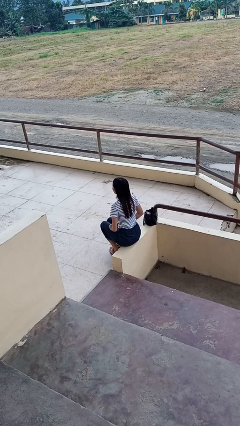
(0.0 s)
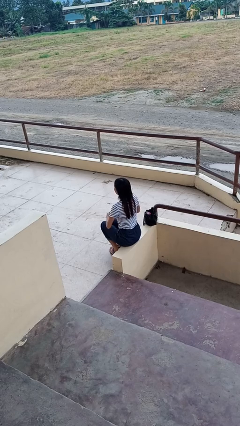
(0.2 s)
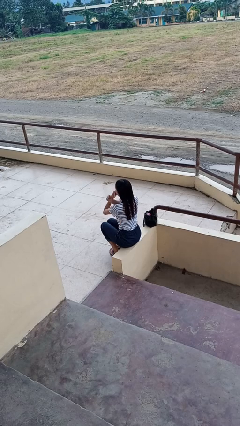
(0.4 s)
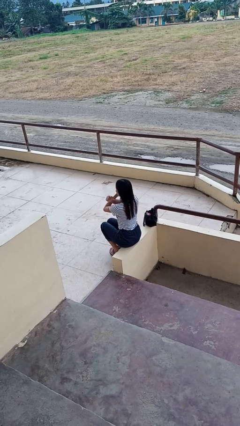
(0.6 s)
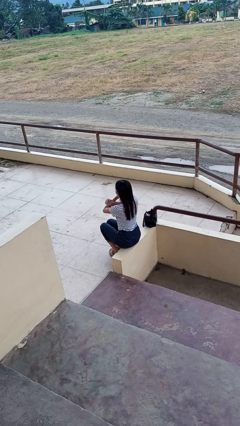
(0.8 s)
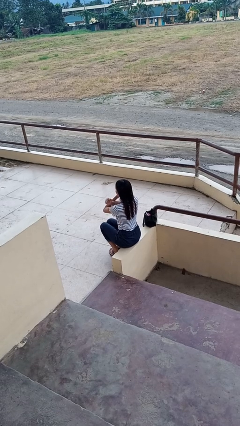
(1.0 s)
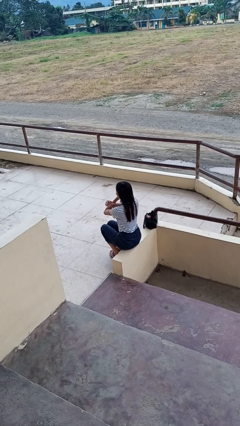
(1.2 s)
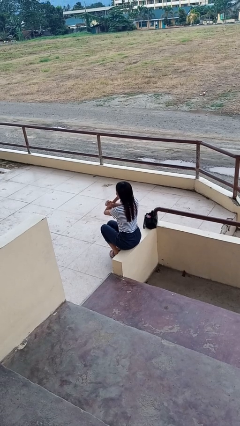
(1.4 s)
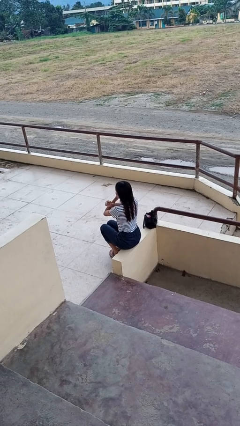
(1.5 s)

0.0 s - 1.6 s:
person gestures arms x

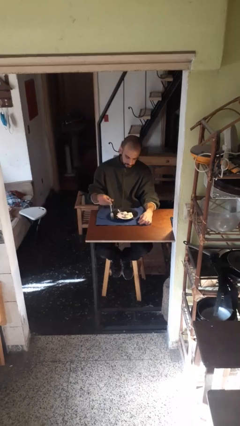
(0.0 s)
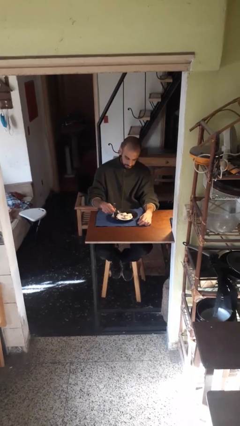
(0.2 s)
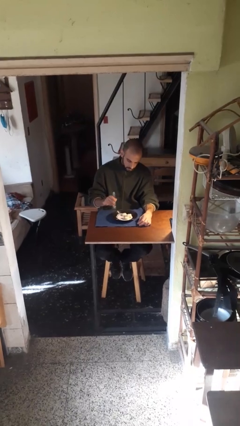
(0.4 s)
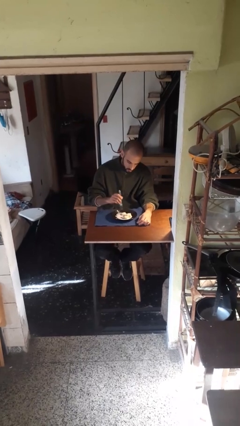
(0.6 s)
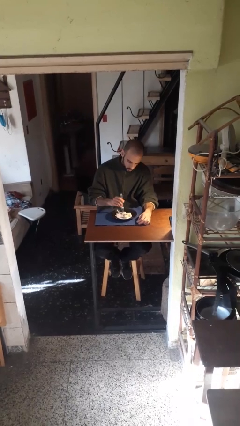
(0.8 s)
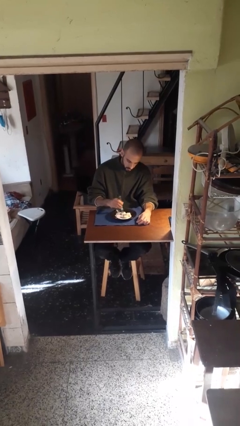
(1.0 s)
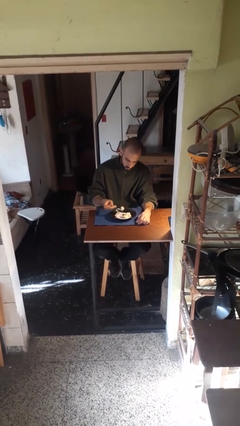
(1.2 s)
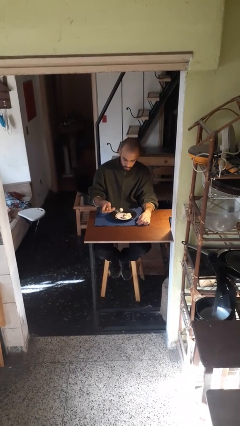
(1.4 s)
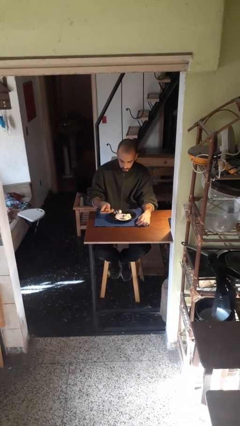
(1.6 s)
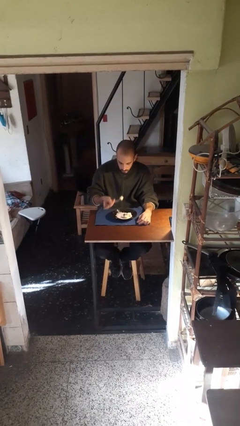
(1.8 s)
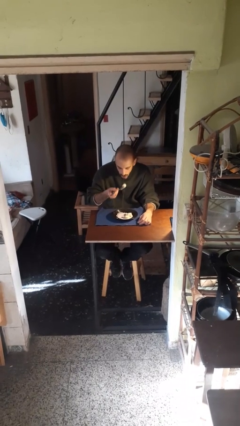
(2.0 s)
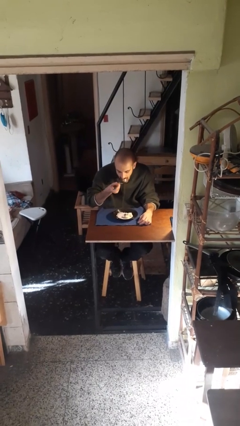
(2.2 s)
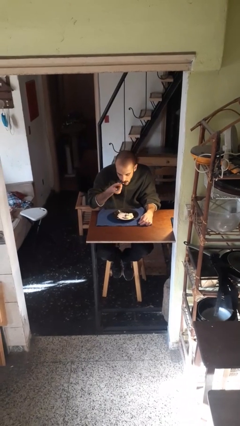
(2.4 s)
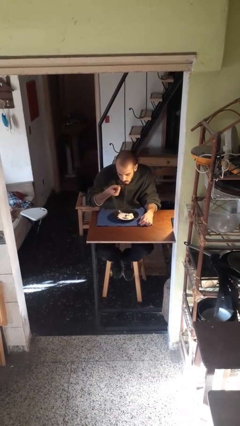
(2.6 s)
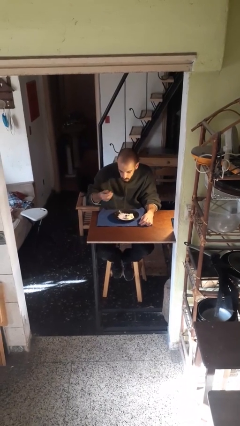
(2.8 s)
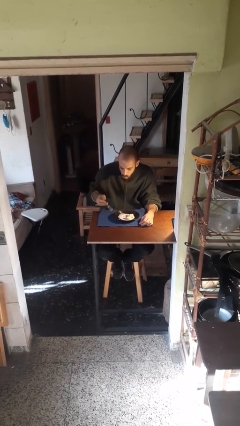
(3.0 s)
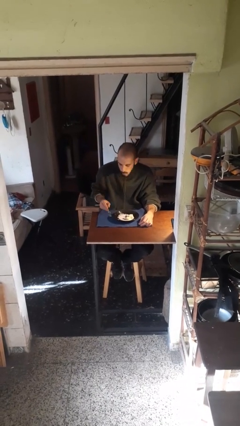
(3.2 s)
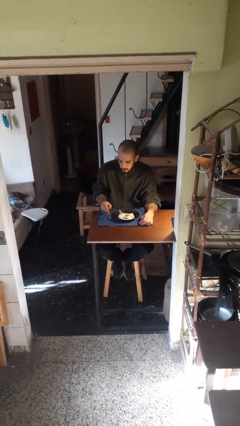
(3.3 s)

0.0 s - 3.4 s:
person eats with utensil

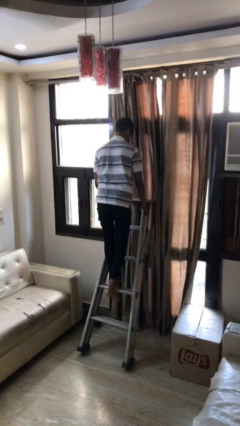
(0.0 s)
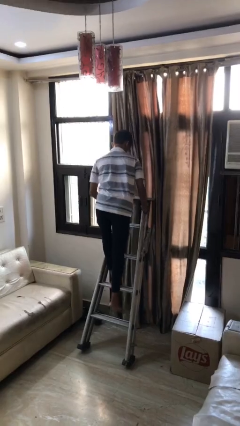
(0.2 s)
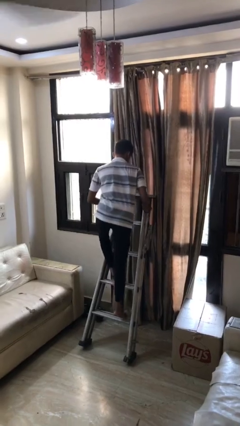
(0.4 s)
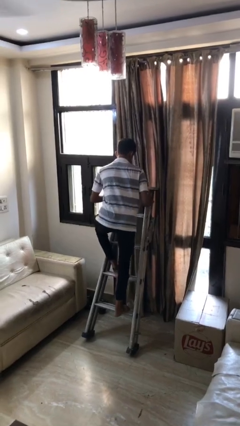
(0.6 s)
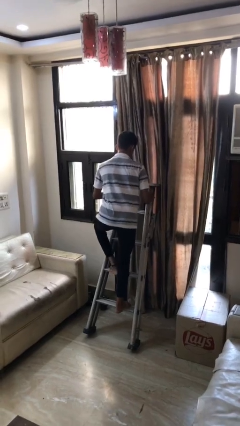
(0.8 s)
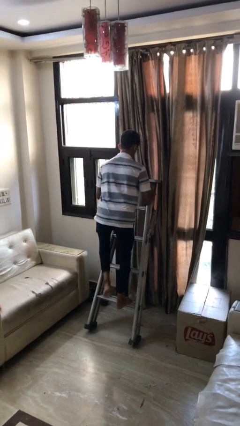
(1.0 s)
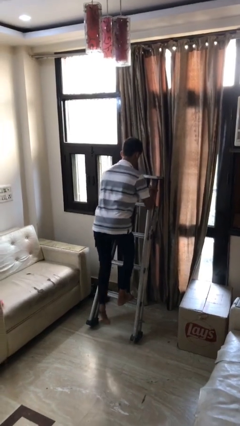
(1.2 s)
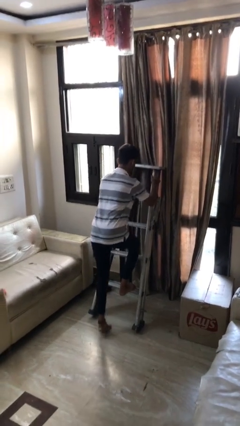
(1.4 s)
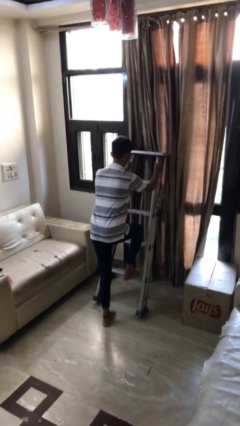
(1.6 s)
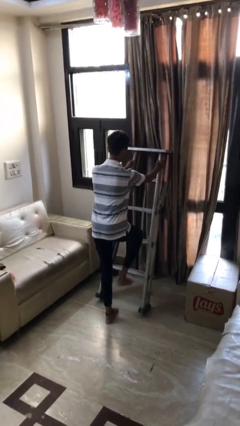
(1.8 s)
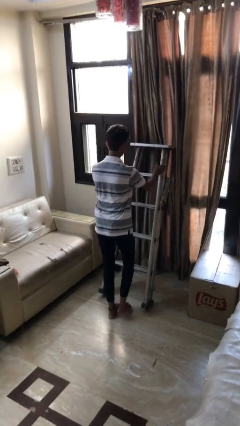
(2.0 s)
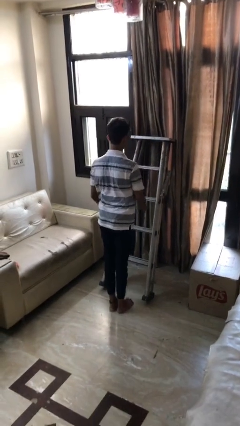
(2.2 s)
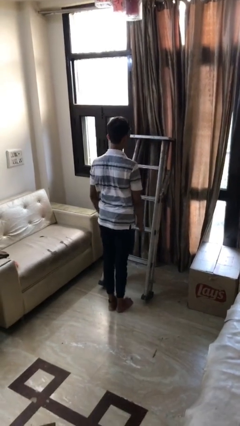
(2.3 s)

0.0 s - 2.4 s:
person climbs down ladder

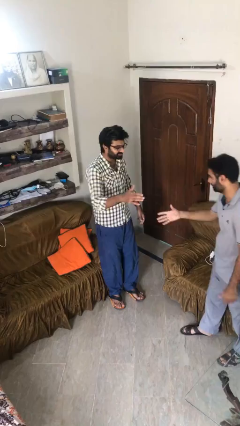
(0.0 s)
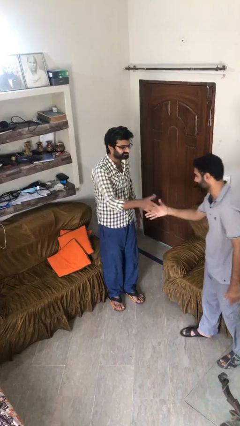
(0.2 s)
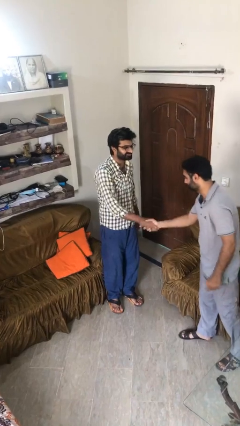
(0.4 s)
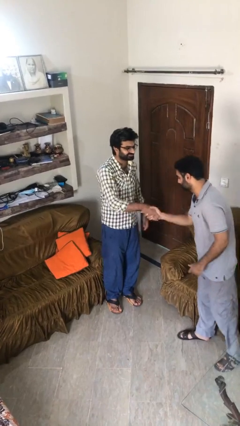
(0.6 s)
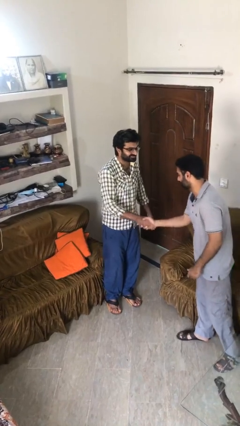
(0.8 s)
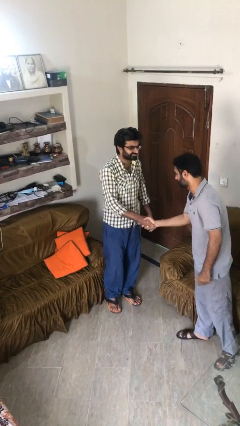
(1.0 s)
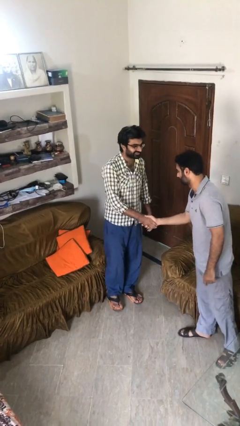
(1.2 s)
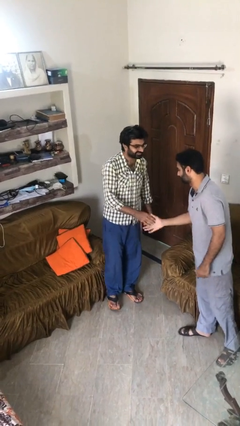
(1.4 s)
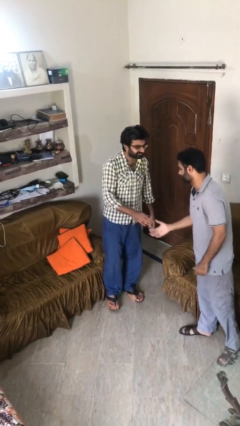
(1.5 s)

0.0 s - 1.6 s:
person shakes hand

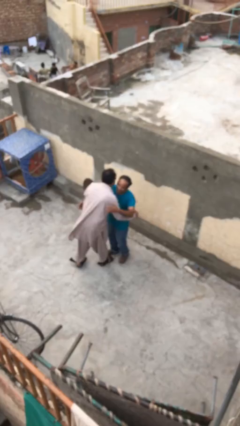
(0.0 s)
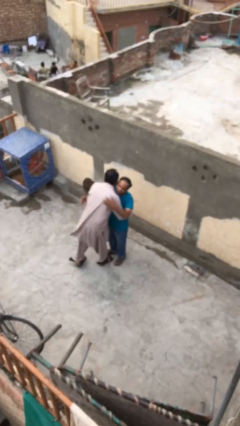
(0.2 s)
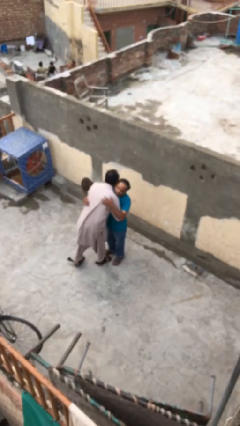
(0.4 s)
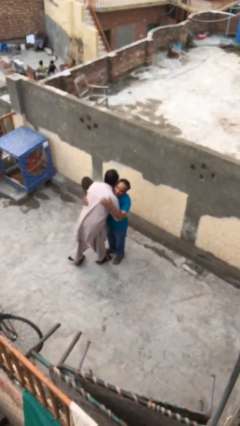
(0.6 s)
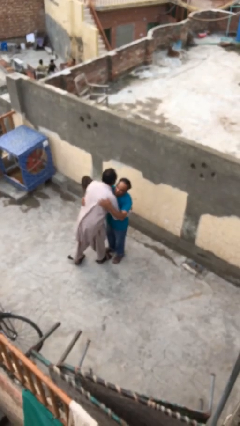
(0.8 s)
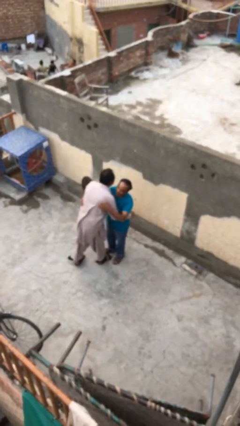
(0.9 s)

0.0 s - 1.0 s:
person embraces person

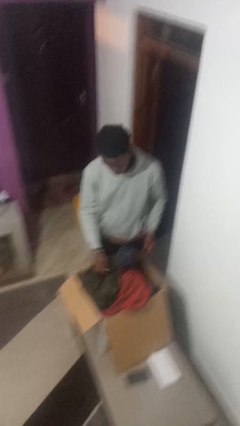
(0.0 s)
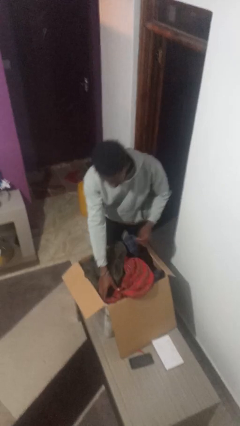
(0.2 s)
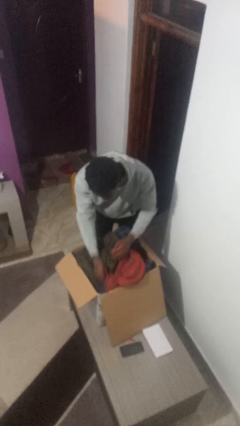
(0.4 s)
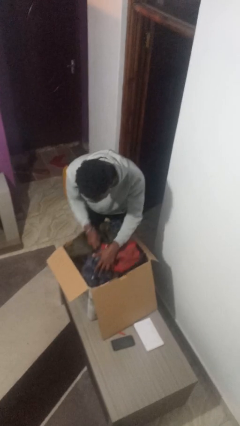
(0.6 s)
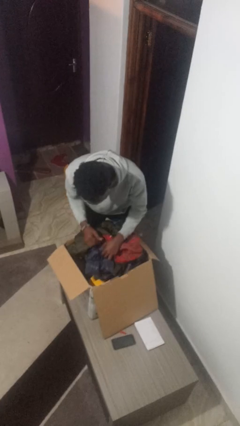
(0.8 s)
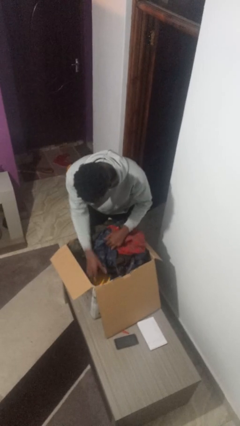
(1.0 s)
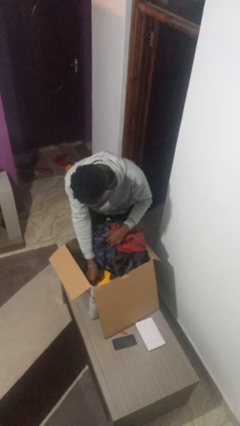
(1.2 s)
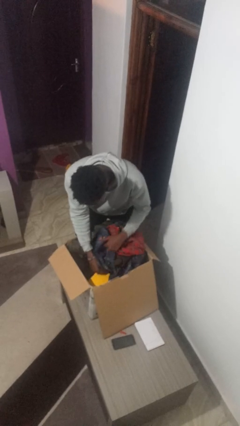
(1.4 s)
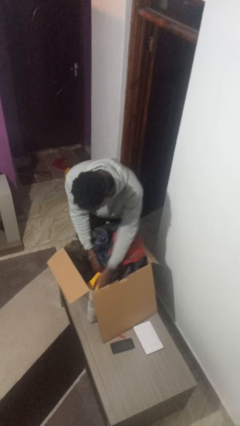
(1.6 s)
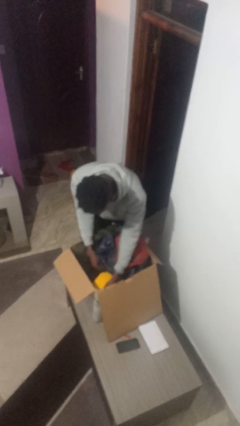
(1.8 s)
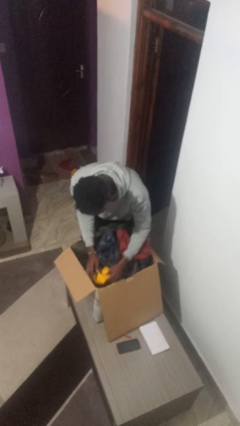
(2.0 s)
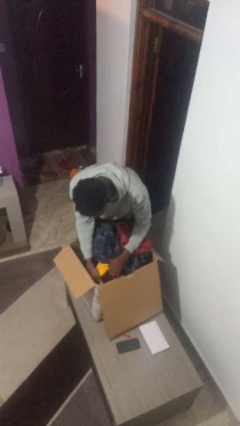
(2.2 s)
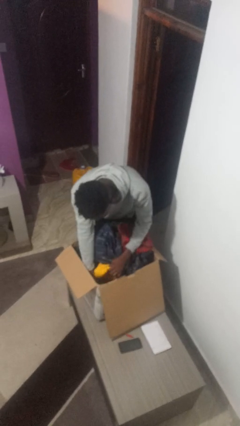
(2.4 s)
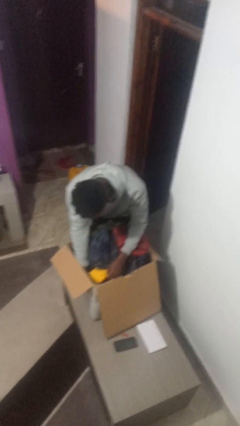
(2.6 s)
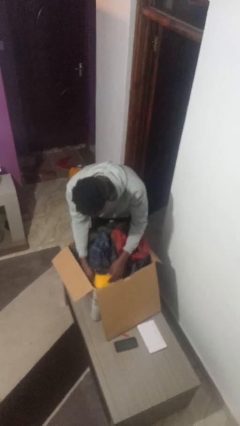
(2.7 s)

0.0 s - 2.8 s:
person searches in box

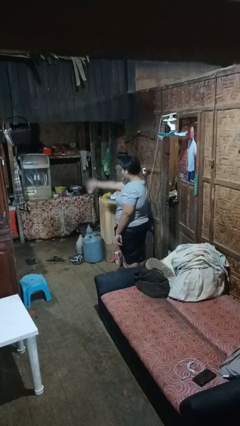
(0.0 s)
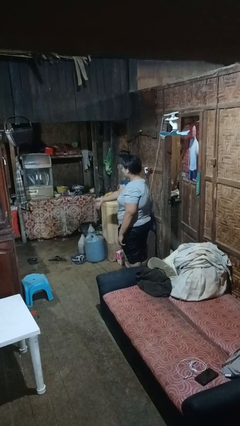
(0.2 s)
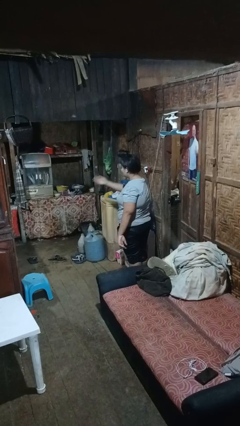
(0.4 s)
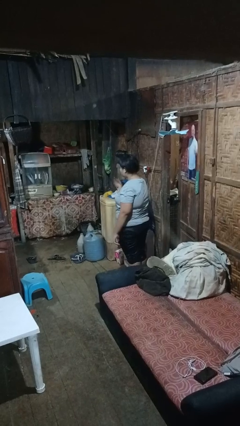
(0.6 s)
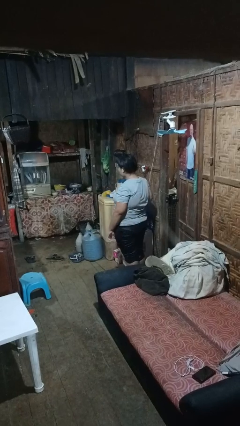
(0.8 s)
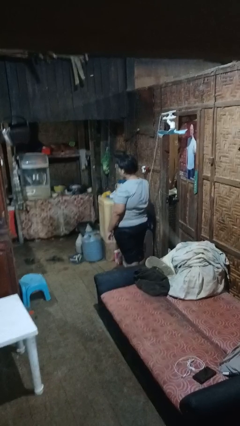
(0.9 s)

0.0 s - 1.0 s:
person karate chop

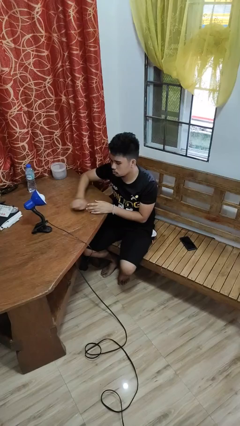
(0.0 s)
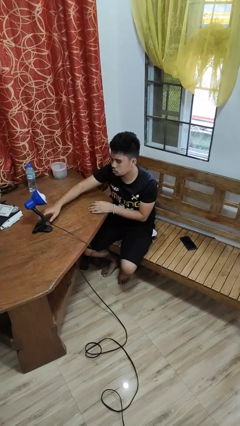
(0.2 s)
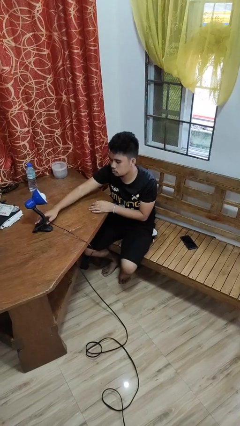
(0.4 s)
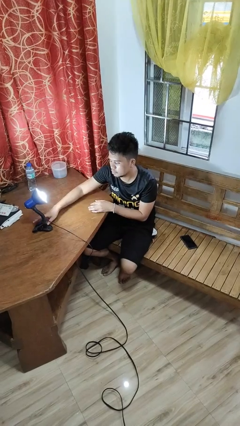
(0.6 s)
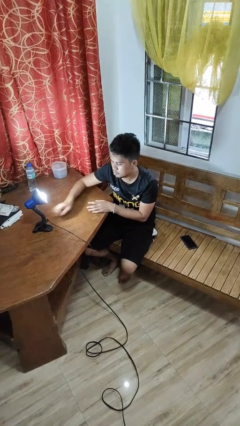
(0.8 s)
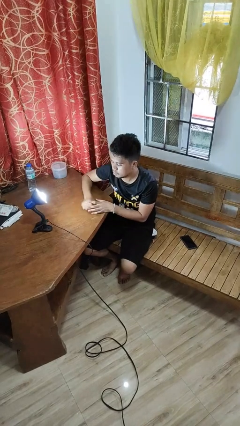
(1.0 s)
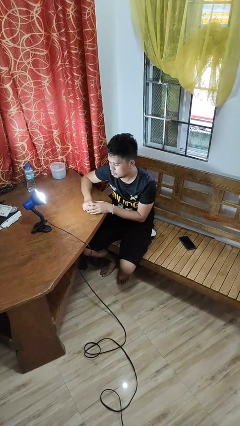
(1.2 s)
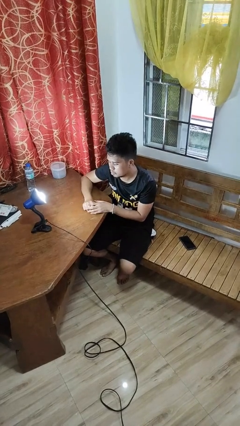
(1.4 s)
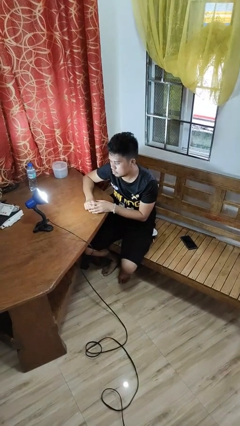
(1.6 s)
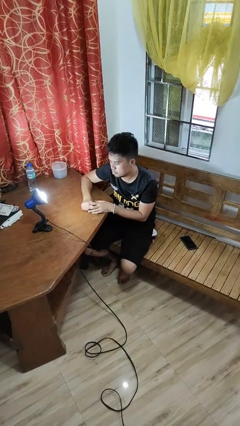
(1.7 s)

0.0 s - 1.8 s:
person turns on lamp

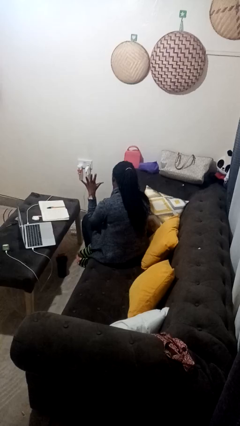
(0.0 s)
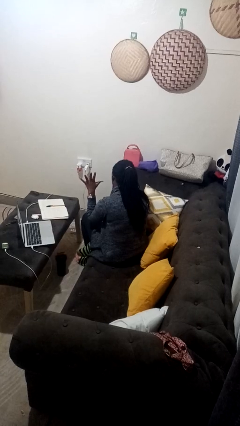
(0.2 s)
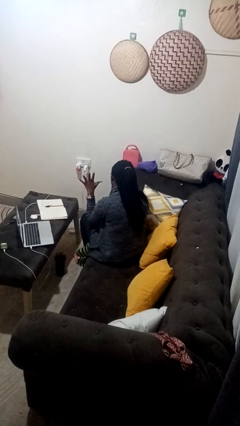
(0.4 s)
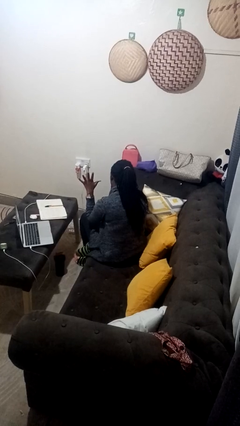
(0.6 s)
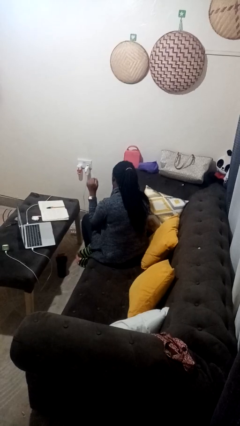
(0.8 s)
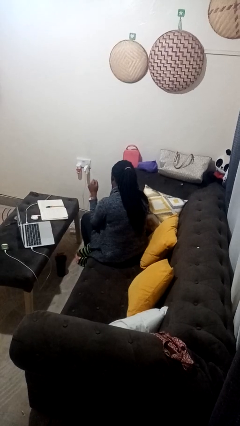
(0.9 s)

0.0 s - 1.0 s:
person gestures number five
